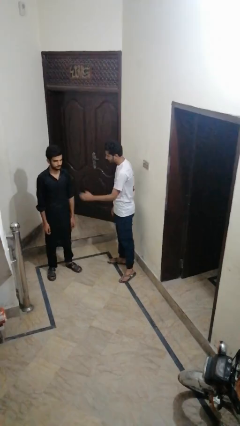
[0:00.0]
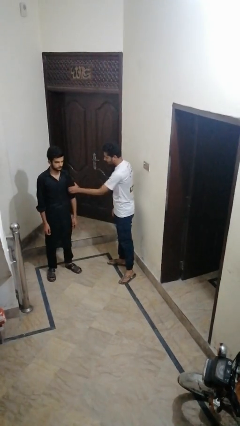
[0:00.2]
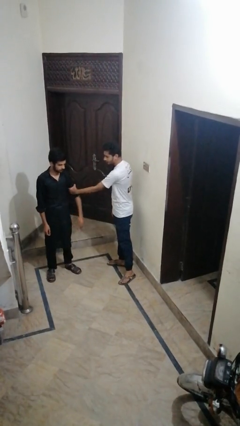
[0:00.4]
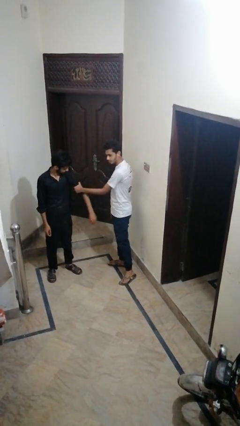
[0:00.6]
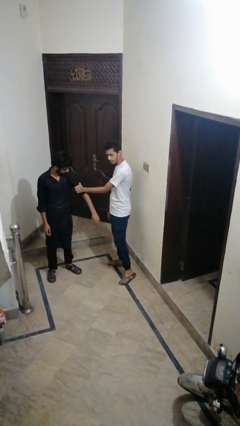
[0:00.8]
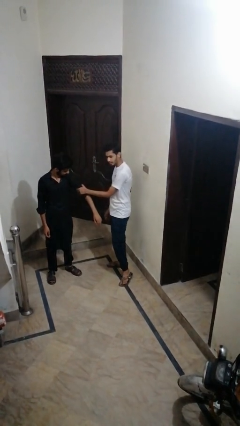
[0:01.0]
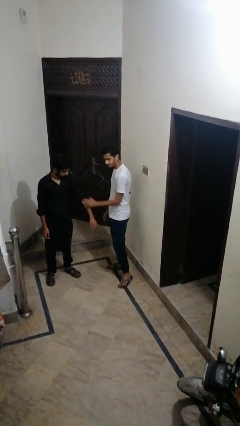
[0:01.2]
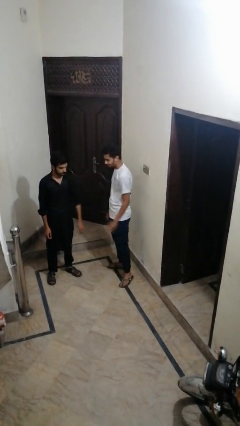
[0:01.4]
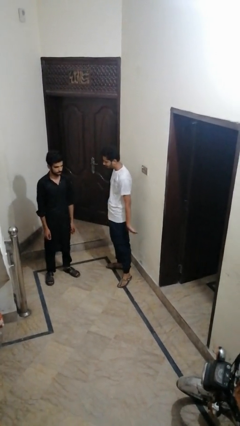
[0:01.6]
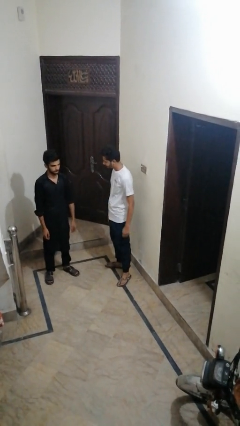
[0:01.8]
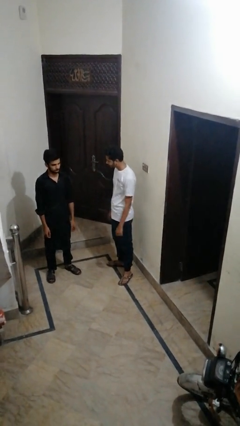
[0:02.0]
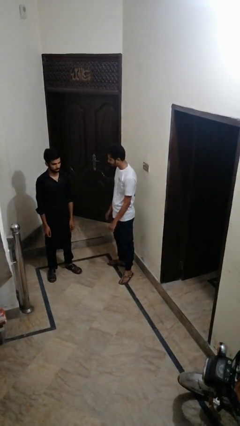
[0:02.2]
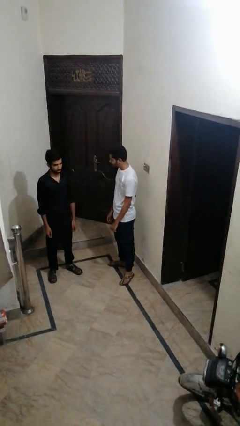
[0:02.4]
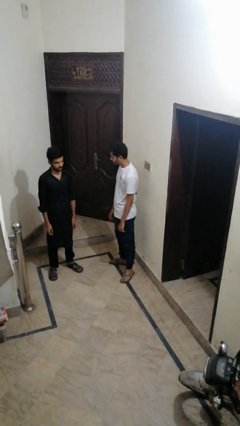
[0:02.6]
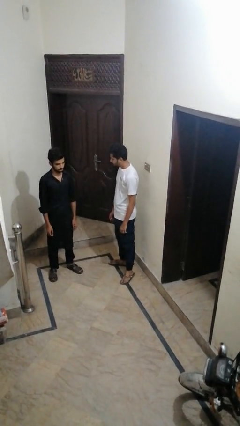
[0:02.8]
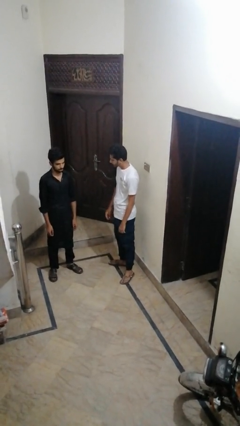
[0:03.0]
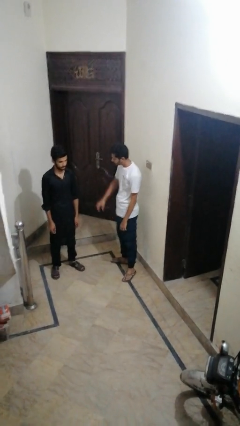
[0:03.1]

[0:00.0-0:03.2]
person grabs person by bicep

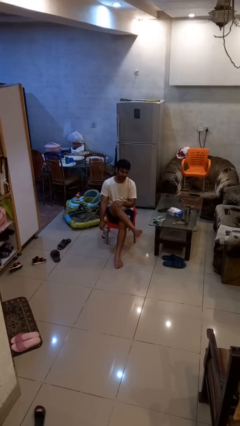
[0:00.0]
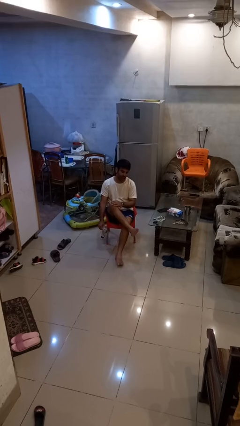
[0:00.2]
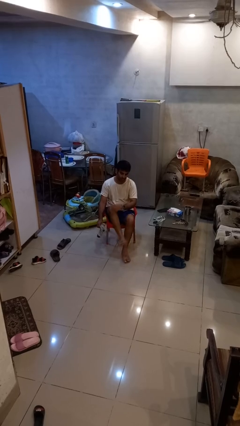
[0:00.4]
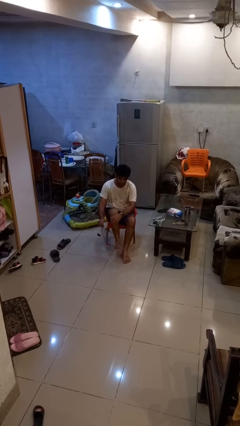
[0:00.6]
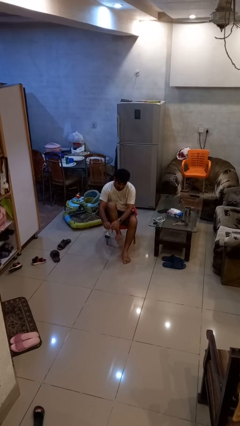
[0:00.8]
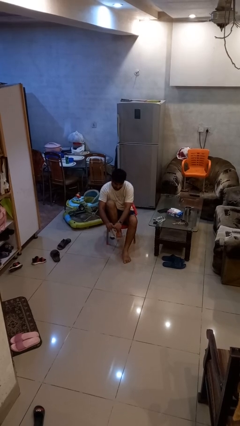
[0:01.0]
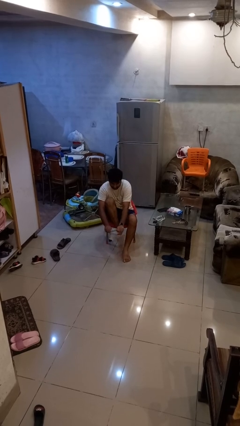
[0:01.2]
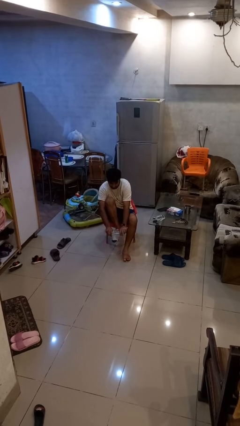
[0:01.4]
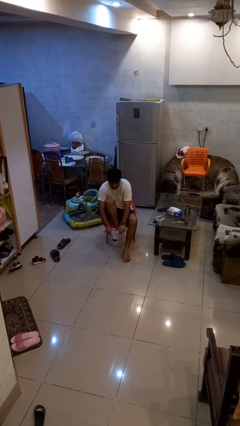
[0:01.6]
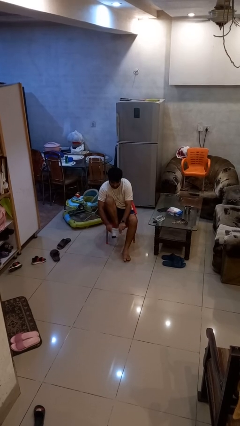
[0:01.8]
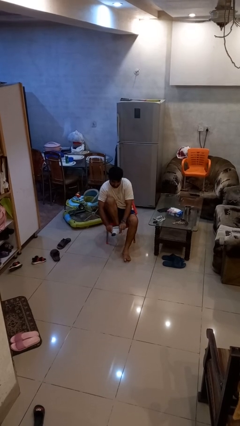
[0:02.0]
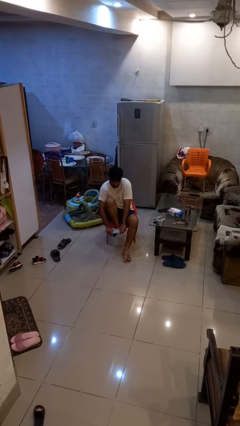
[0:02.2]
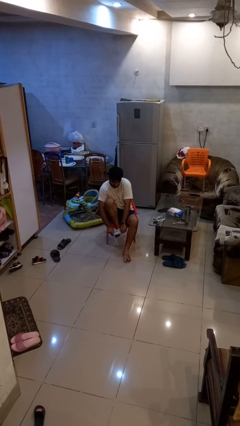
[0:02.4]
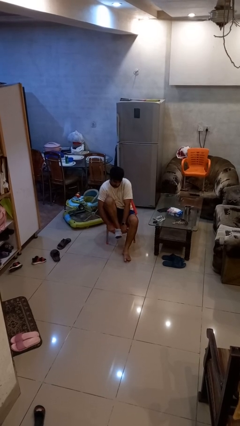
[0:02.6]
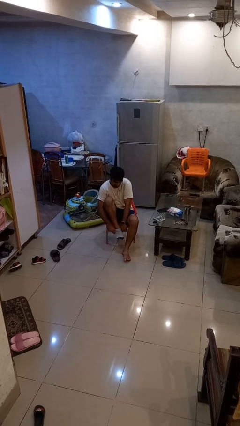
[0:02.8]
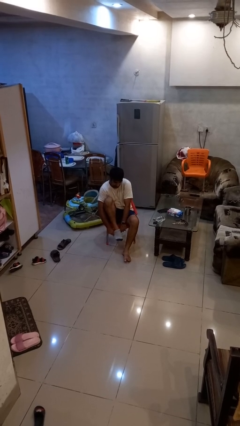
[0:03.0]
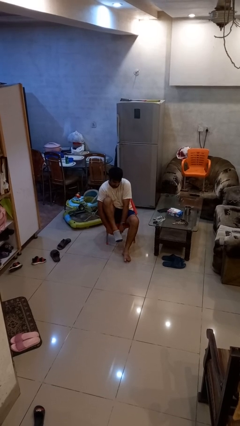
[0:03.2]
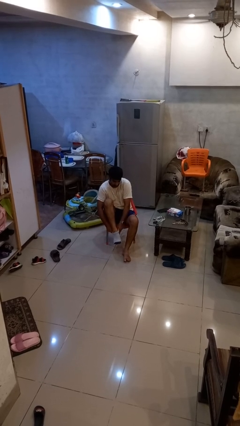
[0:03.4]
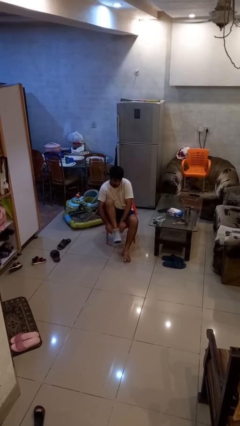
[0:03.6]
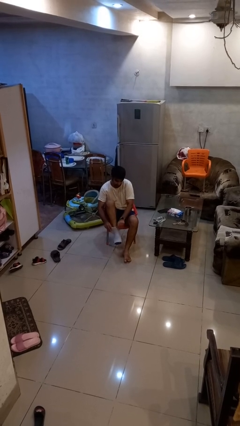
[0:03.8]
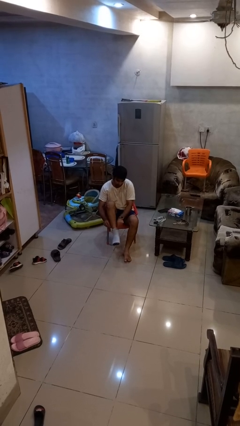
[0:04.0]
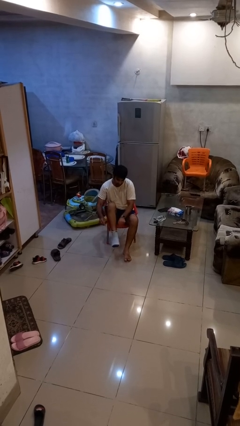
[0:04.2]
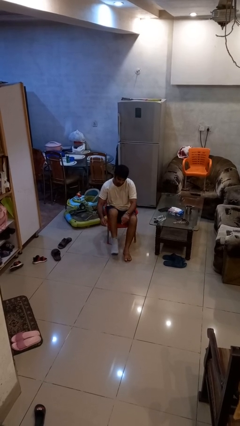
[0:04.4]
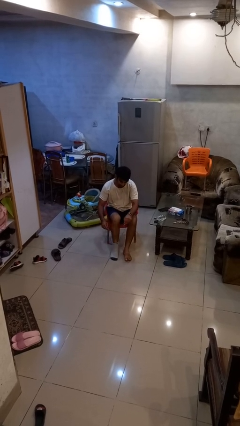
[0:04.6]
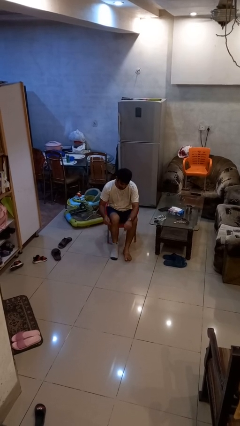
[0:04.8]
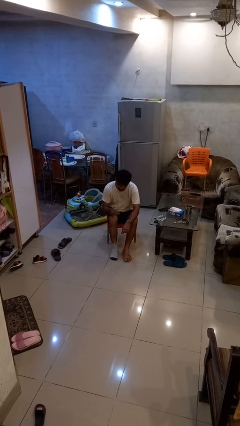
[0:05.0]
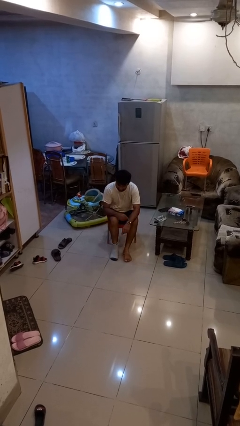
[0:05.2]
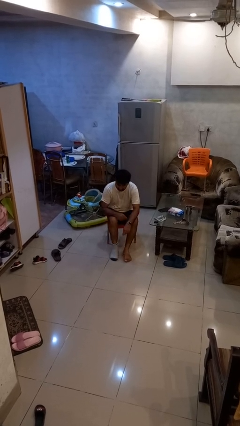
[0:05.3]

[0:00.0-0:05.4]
person puts on socks

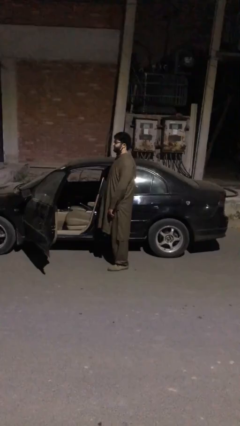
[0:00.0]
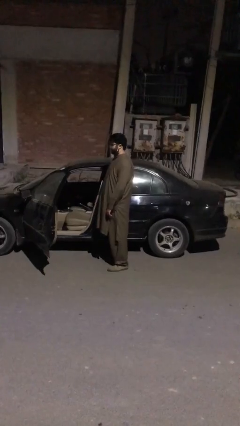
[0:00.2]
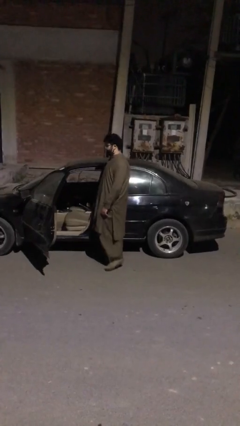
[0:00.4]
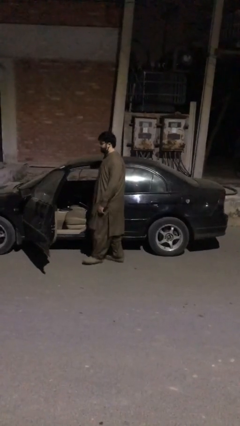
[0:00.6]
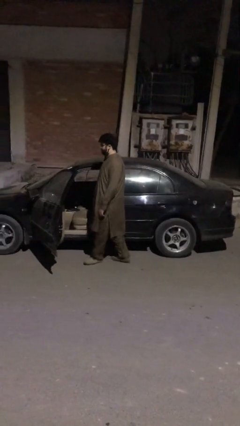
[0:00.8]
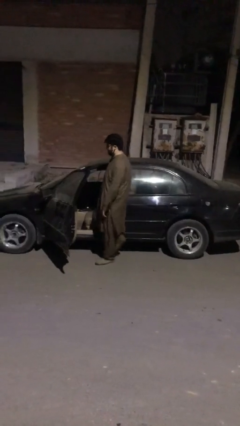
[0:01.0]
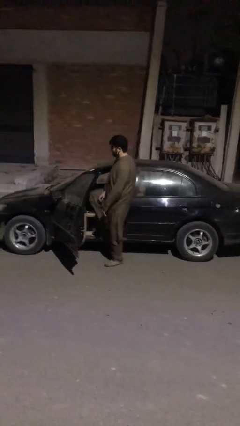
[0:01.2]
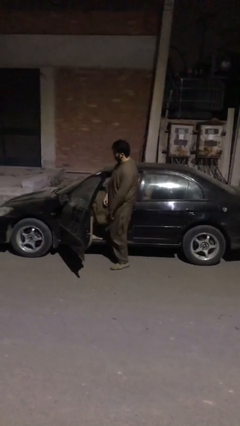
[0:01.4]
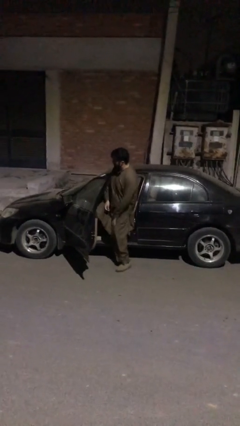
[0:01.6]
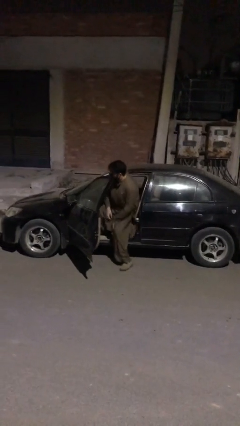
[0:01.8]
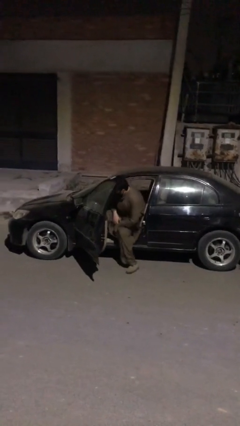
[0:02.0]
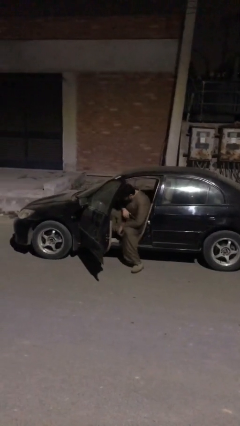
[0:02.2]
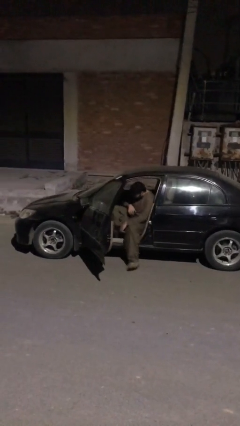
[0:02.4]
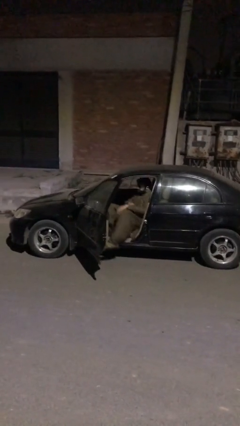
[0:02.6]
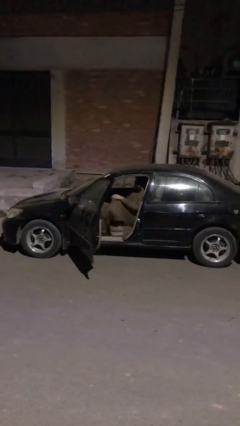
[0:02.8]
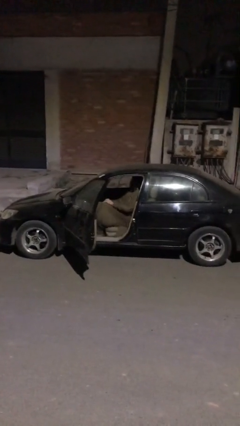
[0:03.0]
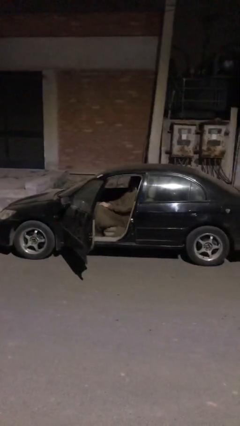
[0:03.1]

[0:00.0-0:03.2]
person enters car

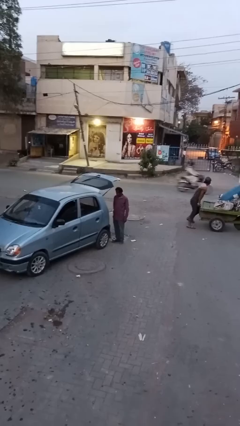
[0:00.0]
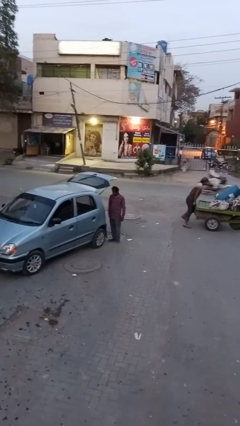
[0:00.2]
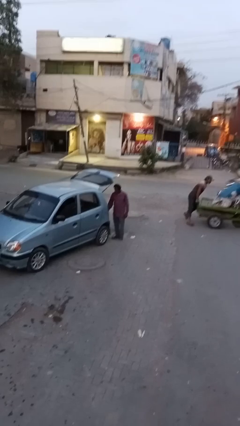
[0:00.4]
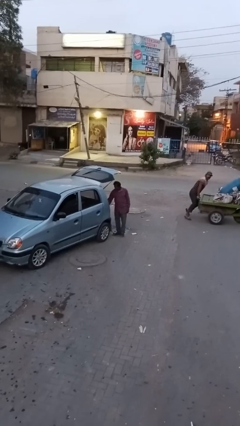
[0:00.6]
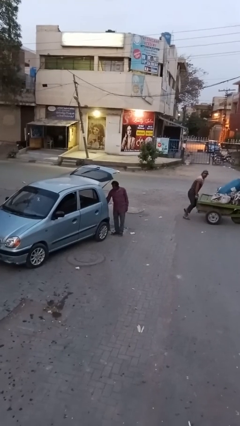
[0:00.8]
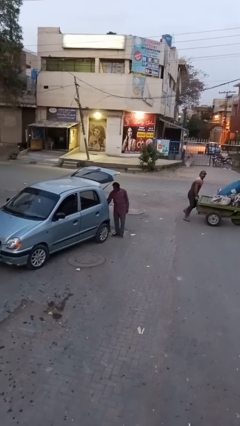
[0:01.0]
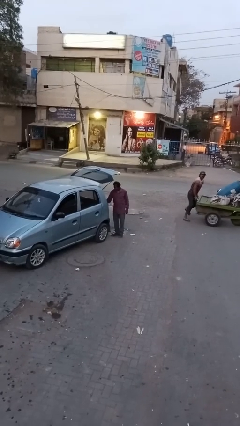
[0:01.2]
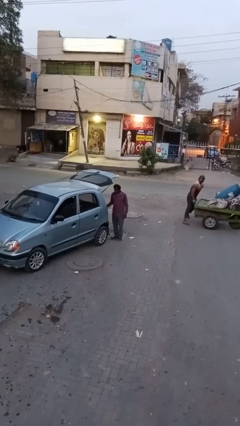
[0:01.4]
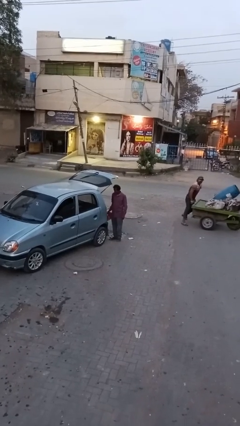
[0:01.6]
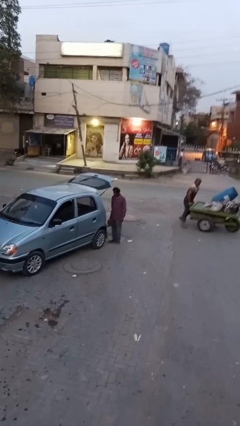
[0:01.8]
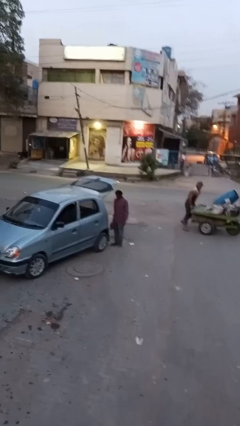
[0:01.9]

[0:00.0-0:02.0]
person unloads car

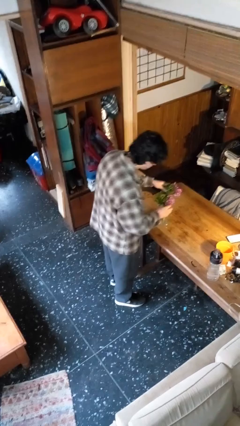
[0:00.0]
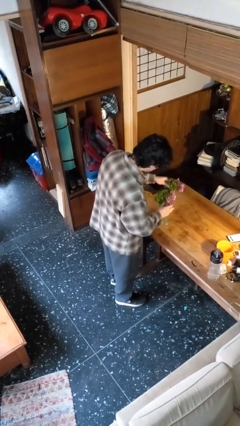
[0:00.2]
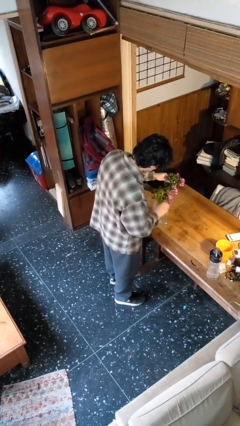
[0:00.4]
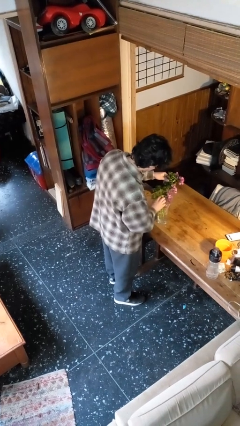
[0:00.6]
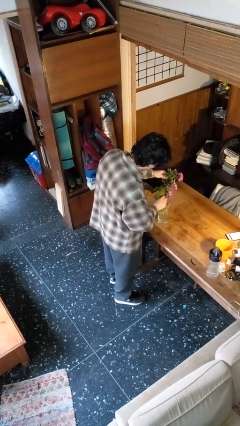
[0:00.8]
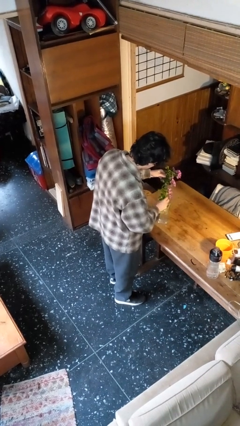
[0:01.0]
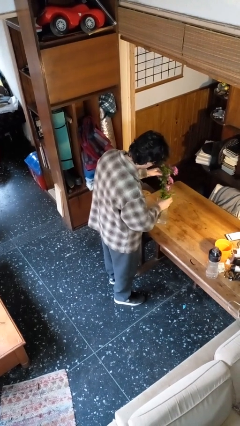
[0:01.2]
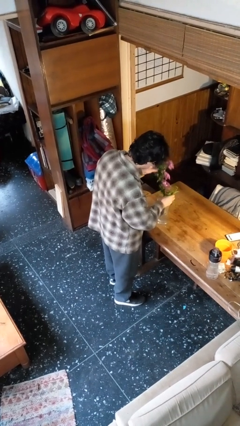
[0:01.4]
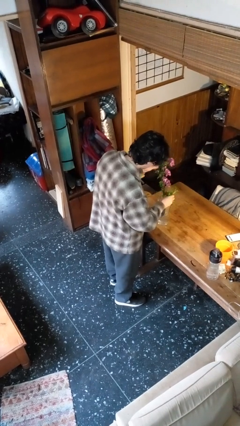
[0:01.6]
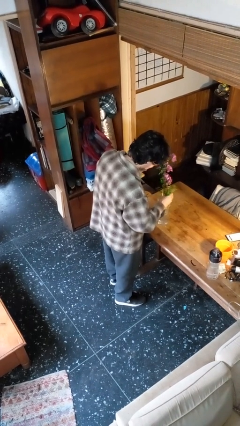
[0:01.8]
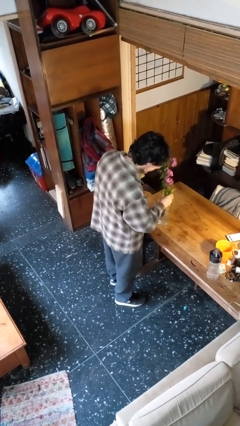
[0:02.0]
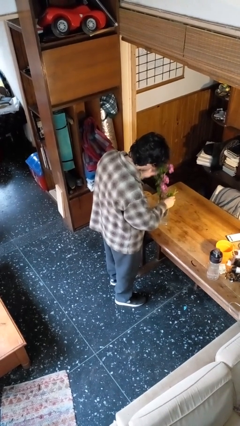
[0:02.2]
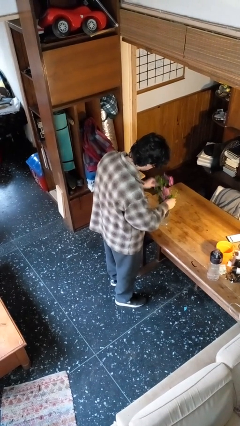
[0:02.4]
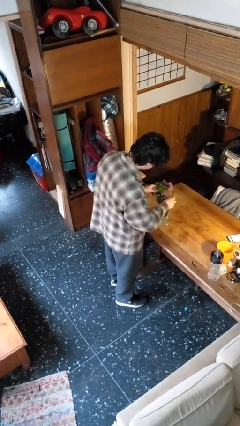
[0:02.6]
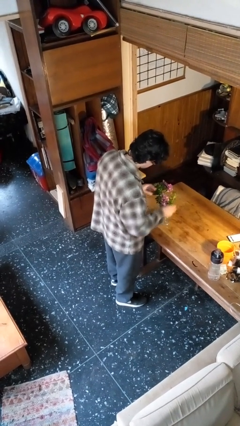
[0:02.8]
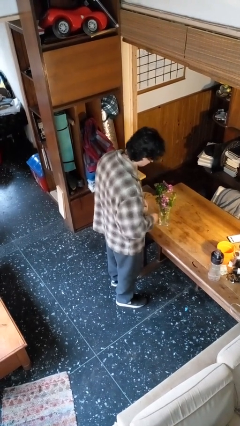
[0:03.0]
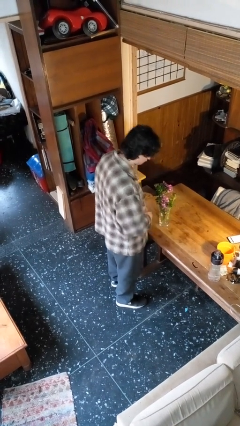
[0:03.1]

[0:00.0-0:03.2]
person arranges flowers in vase

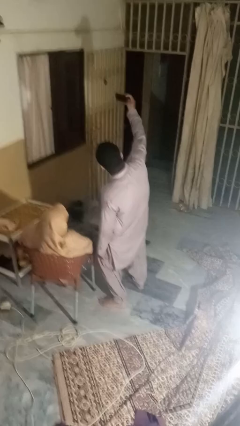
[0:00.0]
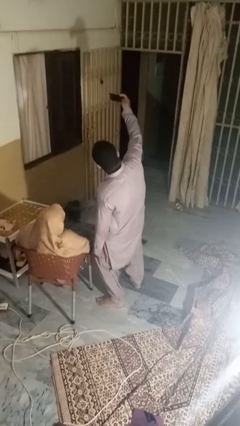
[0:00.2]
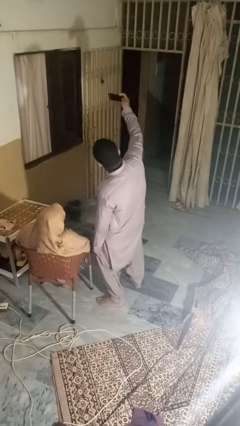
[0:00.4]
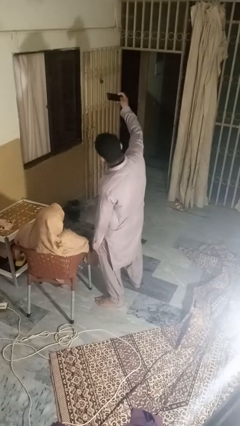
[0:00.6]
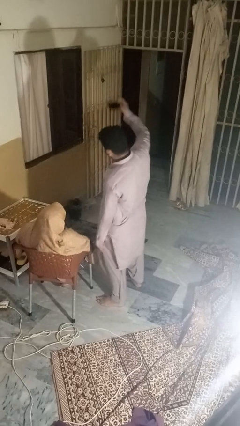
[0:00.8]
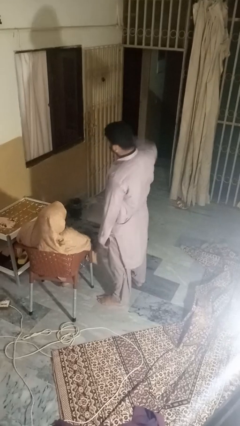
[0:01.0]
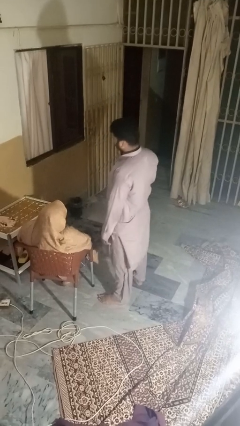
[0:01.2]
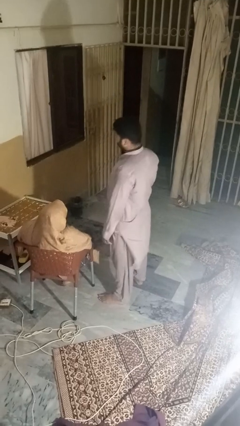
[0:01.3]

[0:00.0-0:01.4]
person takes selfie with person
